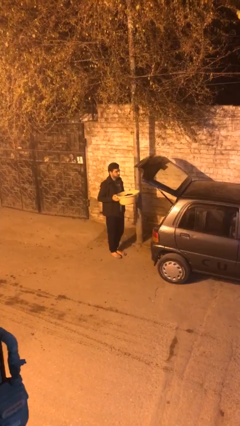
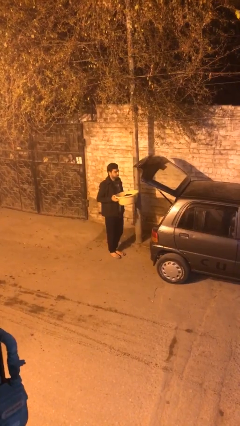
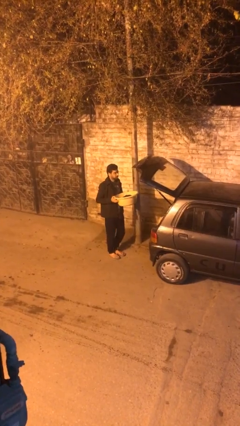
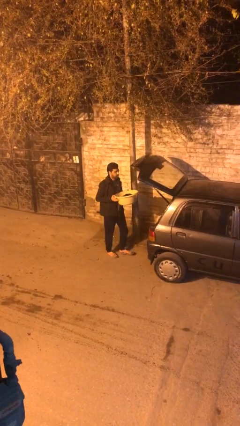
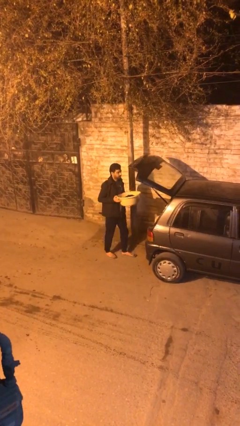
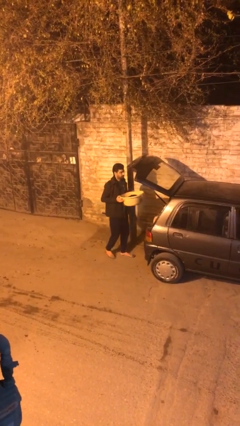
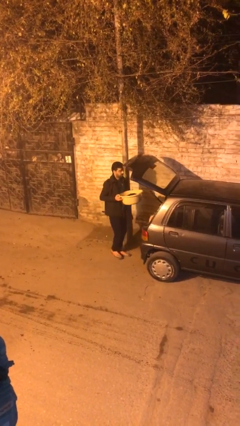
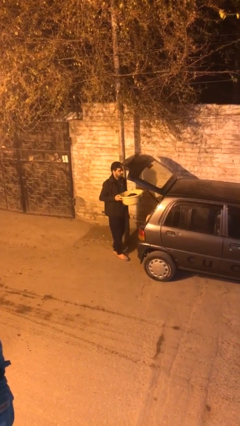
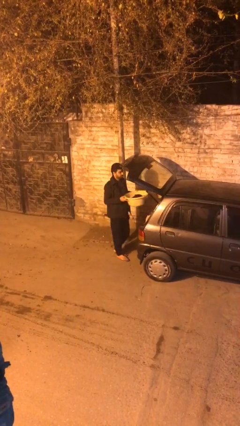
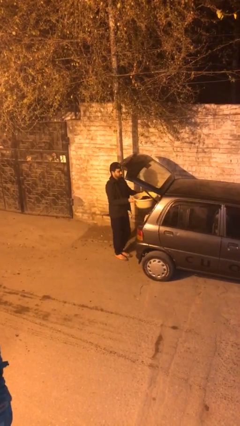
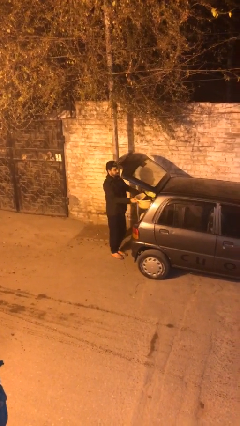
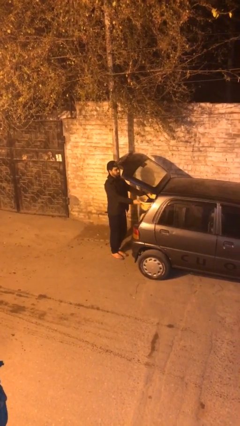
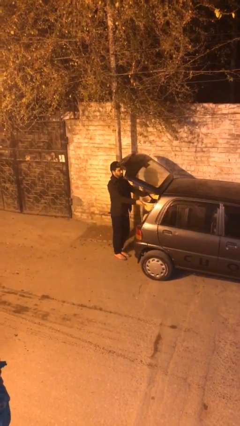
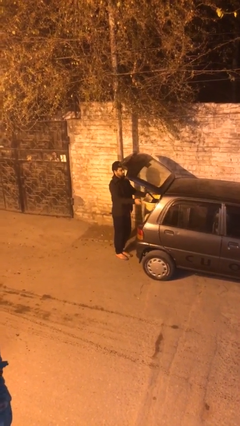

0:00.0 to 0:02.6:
person loads car

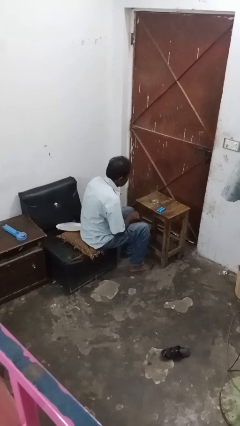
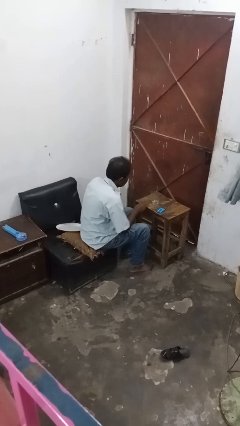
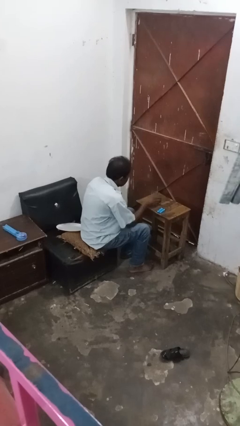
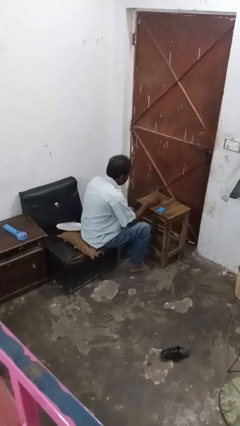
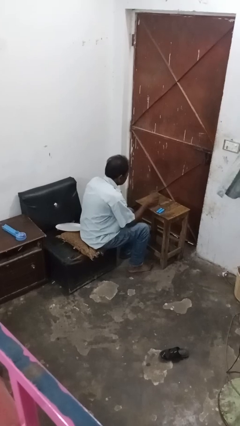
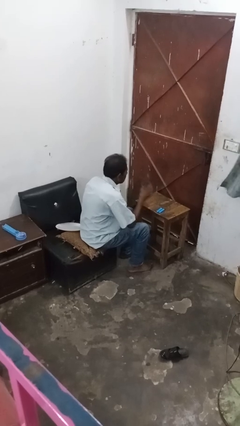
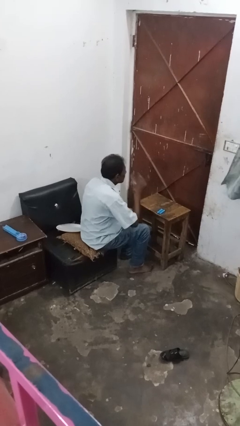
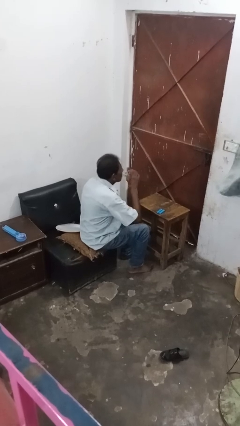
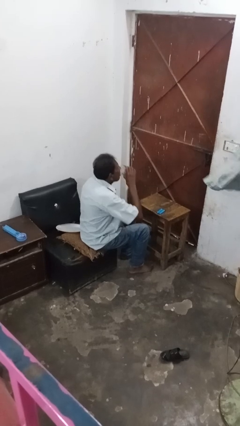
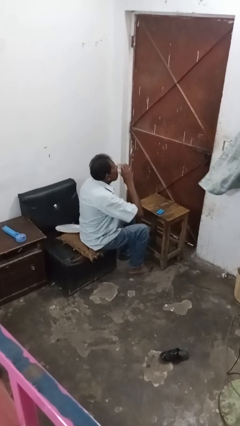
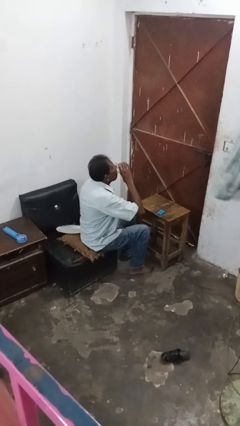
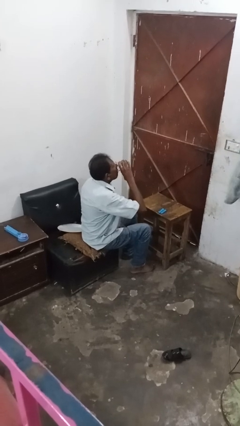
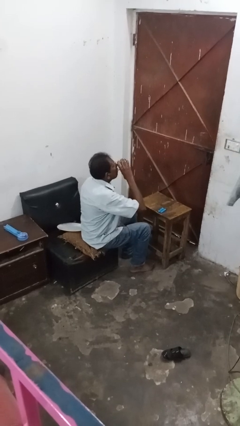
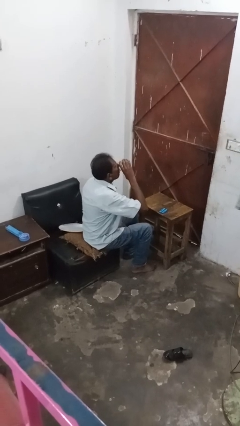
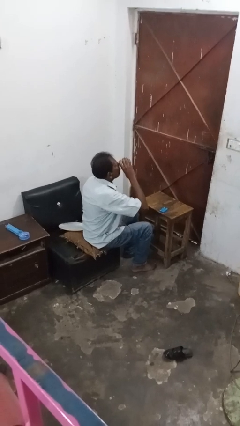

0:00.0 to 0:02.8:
person drinks from cup

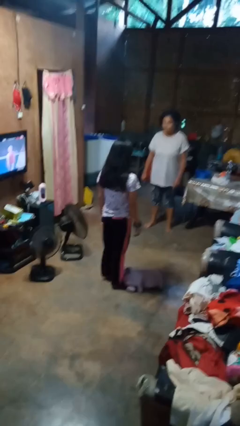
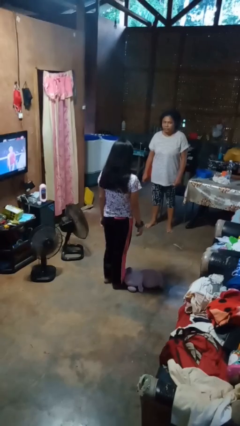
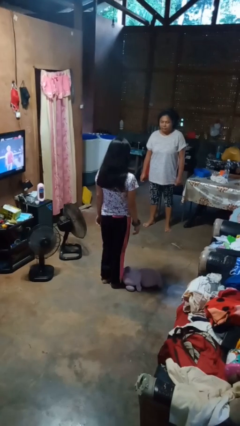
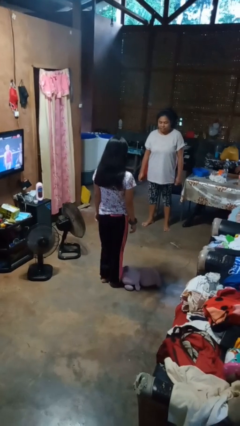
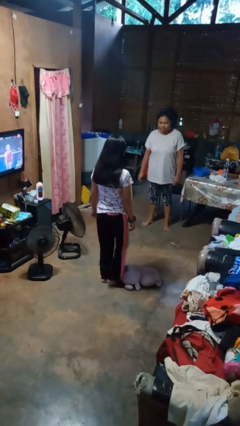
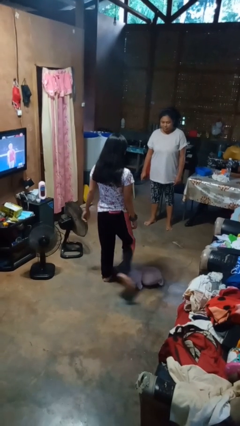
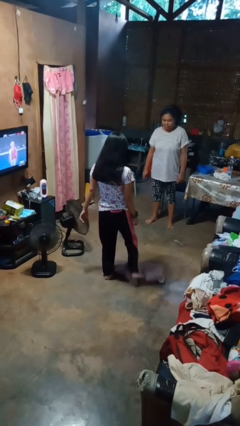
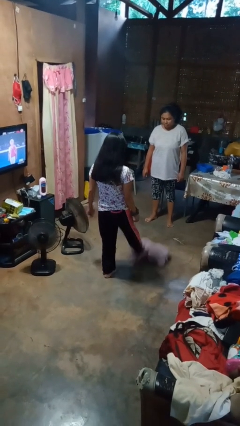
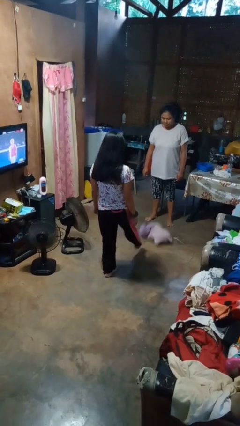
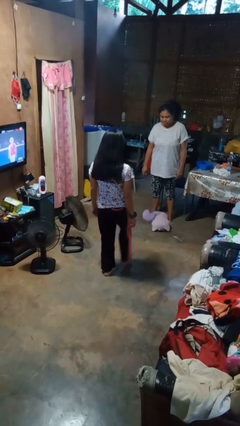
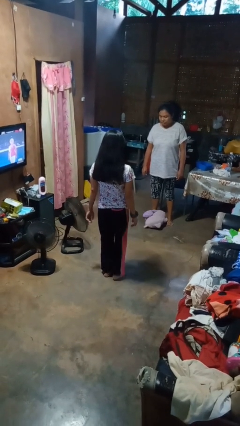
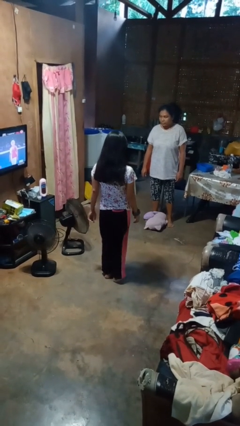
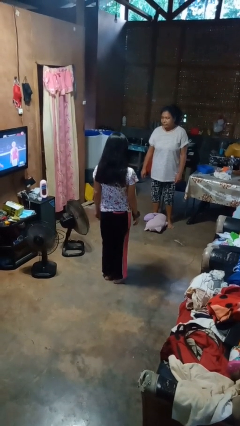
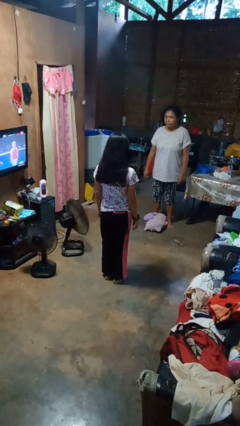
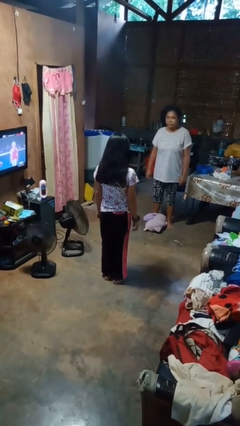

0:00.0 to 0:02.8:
person kicks object to person

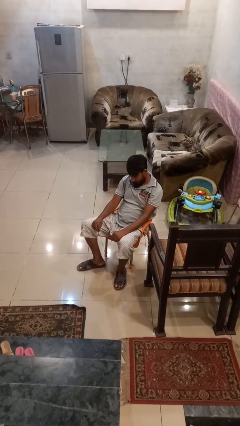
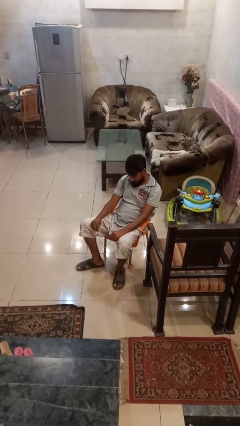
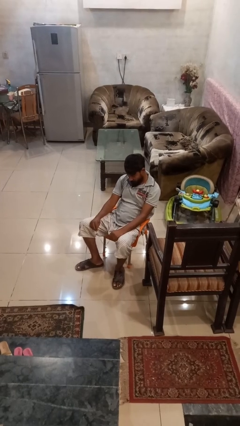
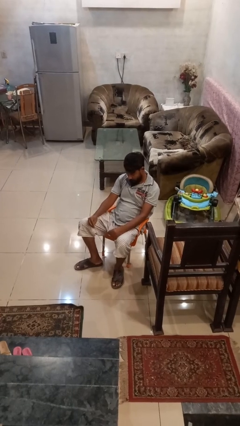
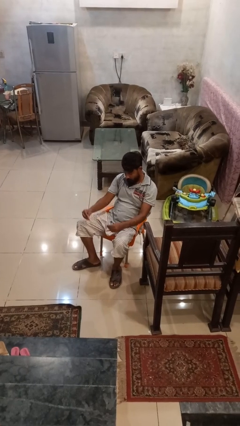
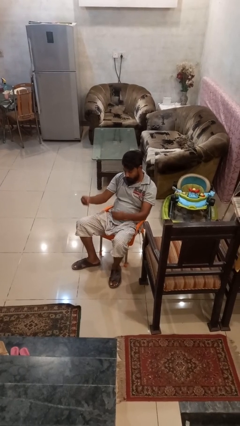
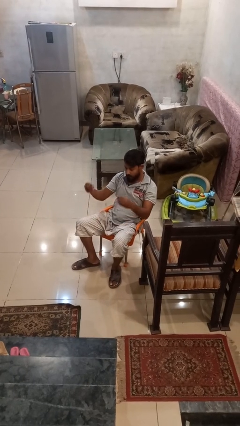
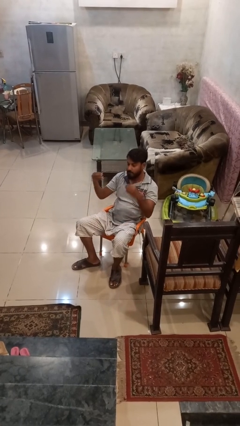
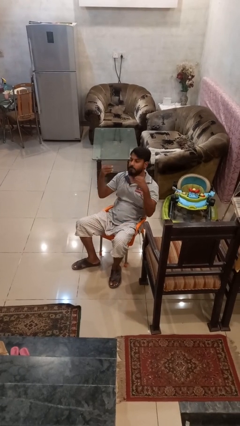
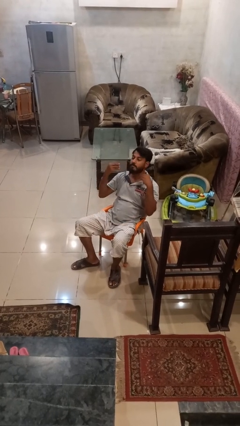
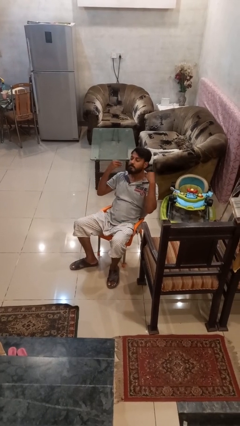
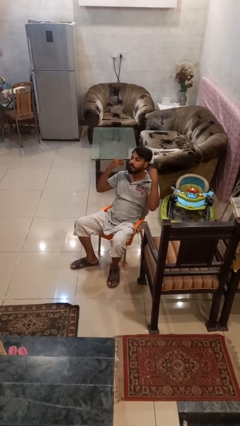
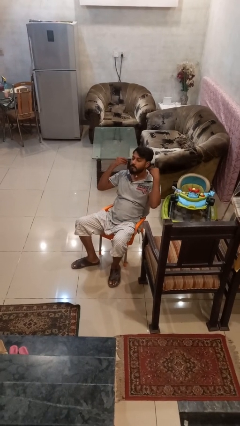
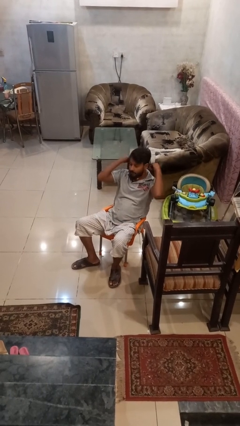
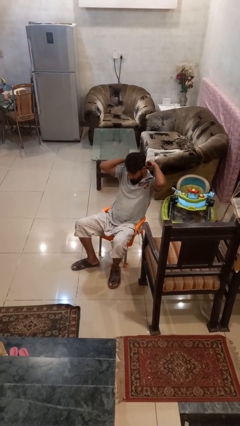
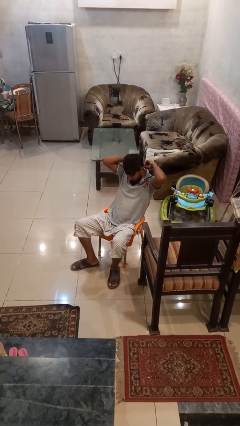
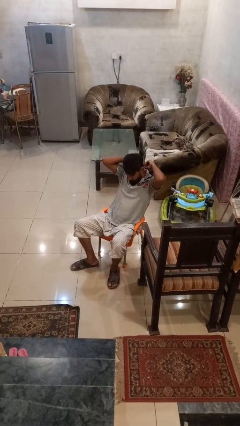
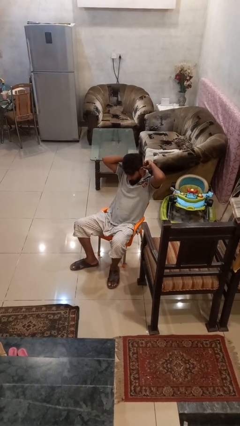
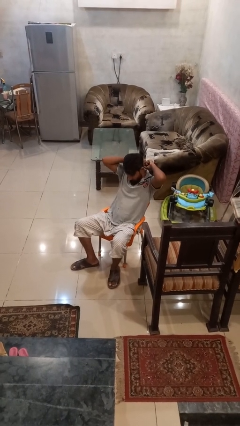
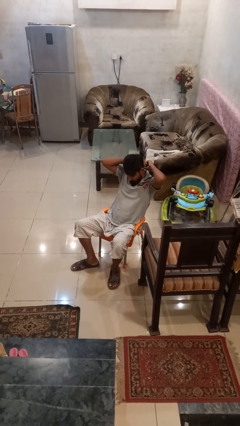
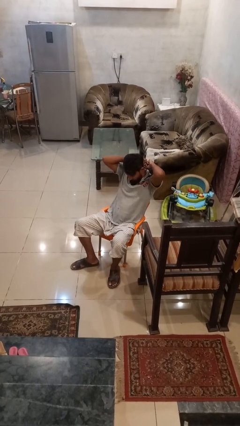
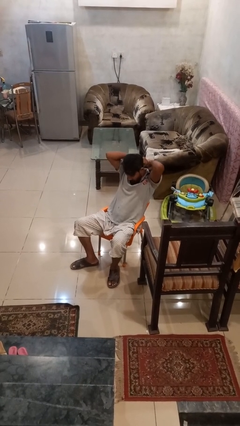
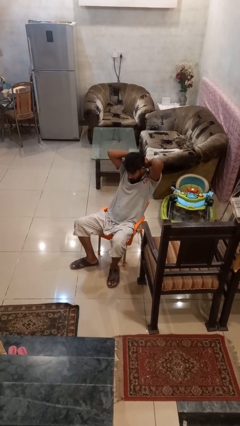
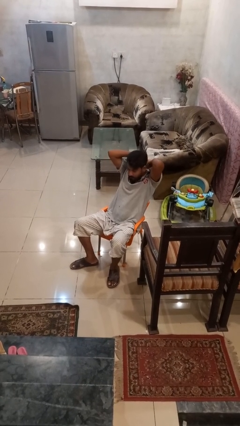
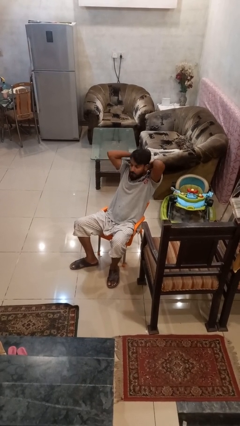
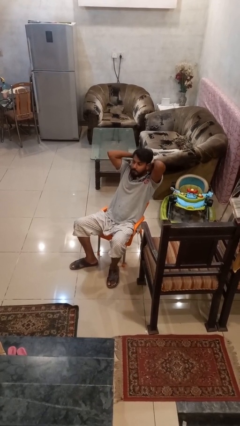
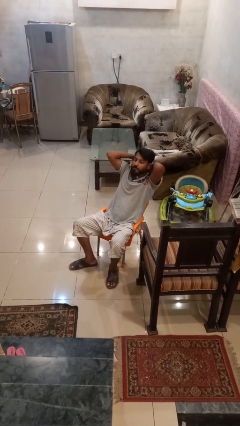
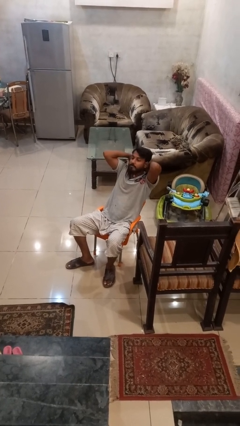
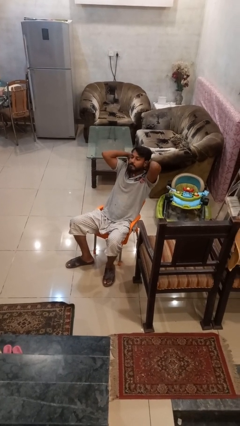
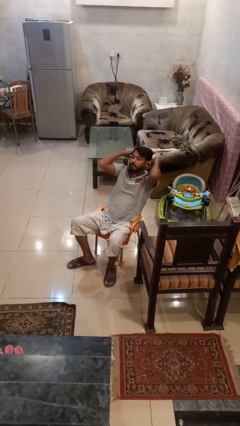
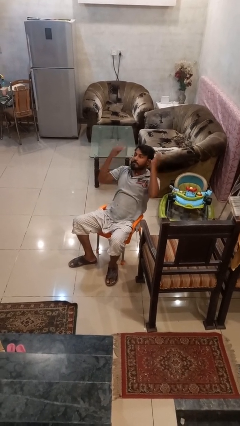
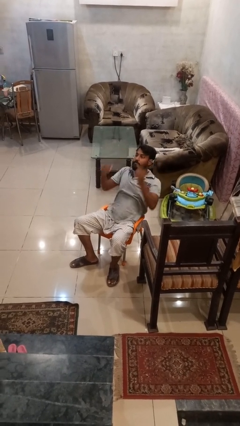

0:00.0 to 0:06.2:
person puts on necklace

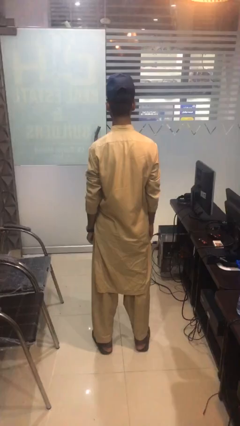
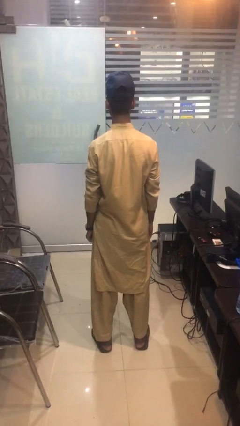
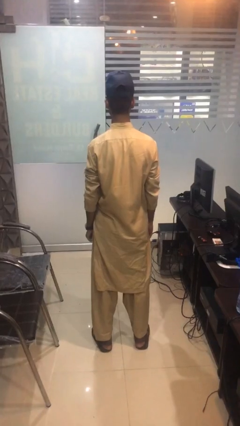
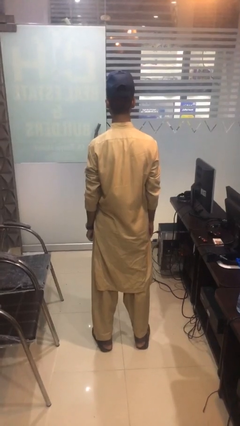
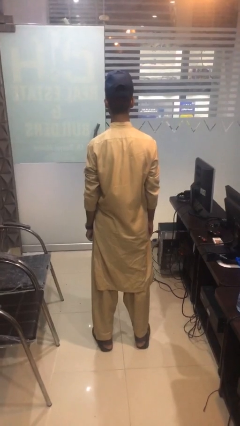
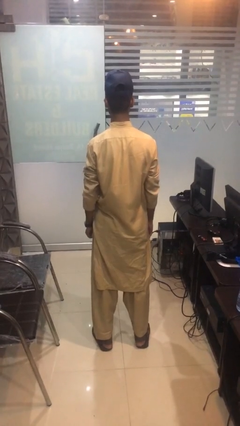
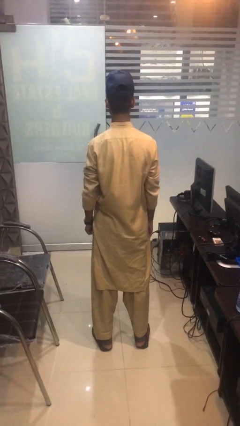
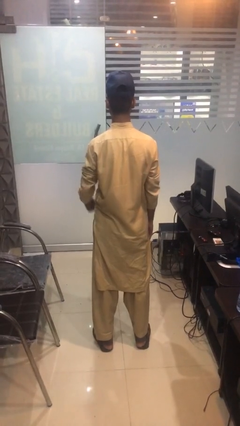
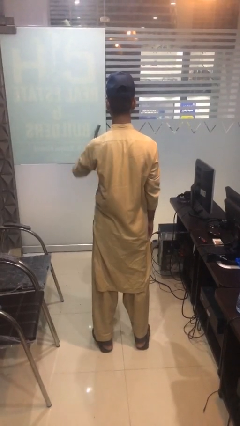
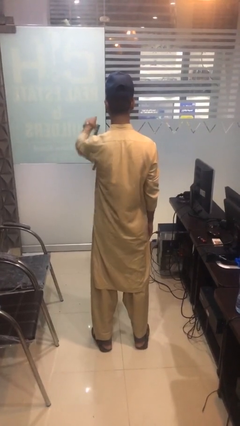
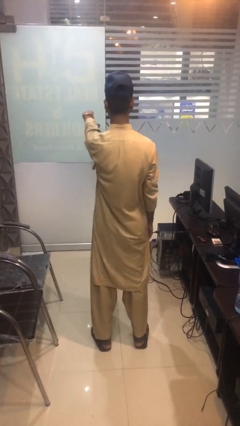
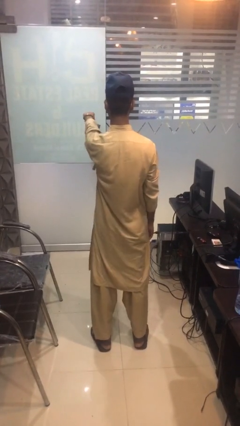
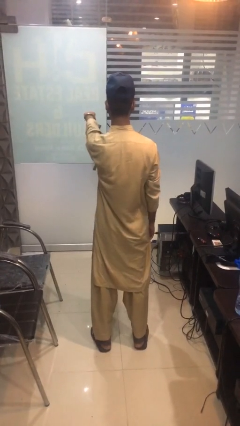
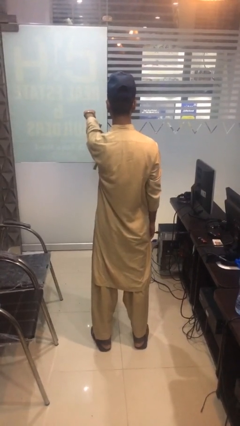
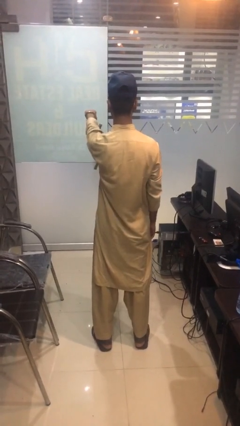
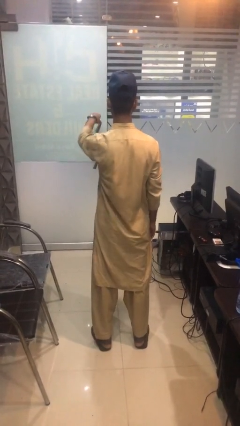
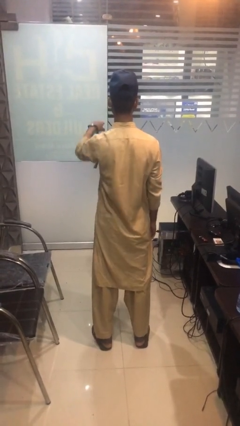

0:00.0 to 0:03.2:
person points at person
